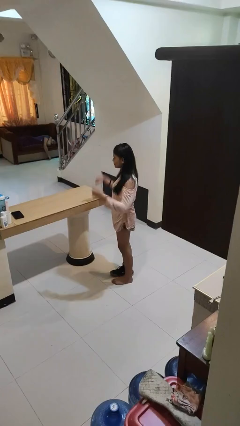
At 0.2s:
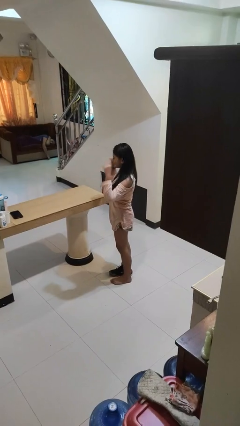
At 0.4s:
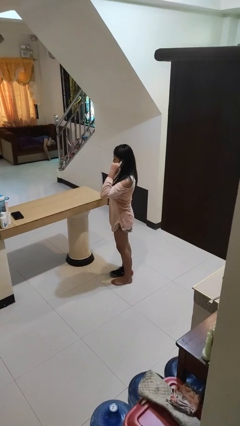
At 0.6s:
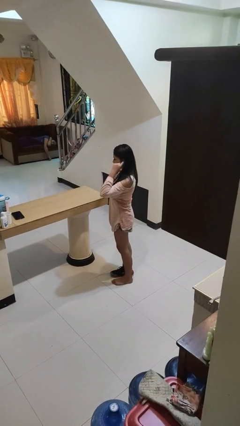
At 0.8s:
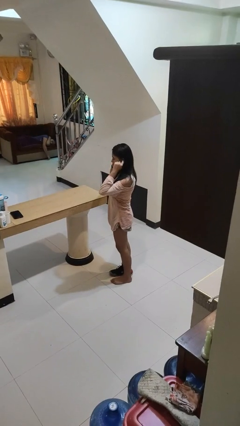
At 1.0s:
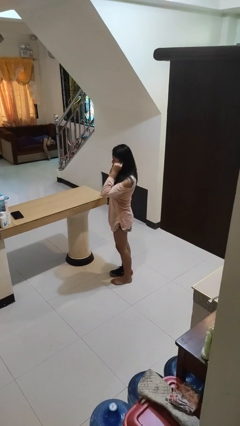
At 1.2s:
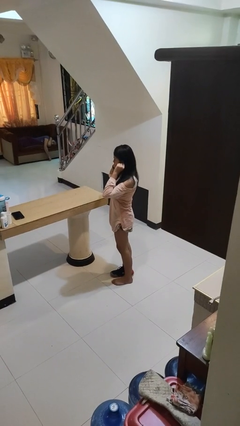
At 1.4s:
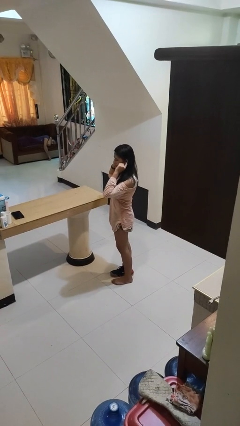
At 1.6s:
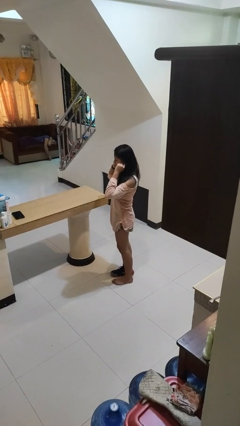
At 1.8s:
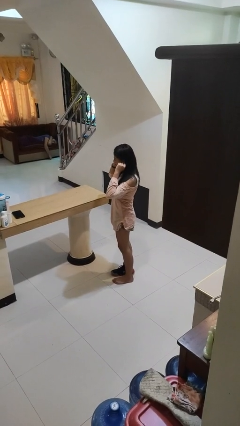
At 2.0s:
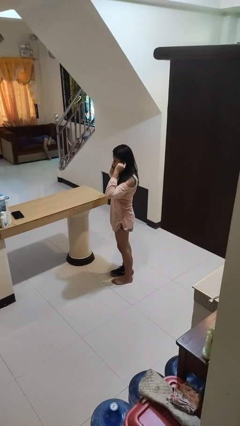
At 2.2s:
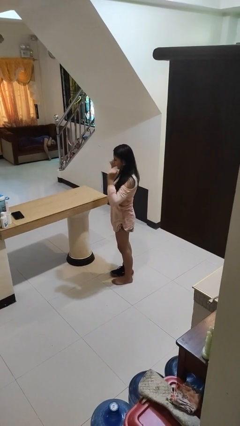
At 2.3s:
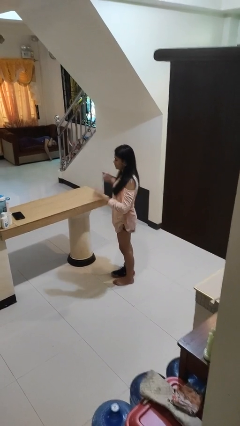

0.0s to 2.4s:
person puts fingers in ear

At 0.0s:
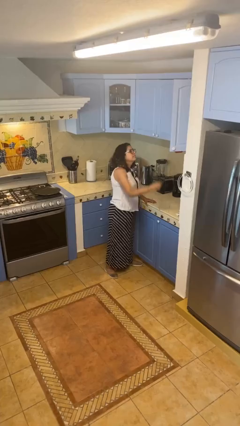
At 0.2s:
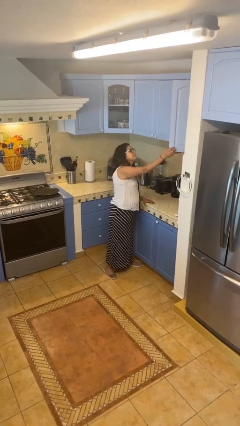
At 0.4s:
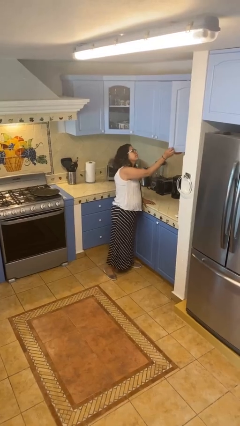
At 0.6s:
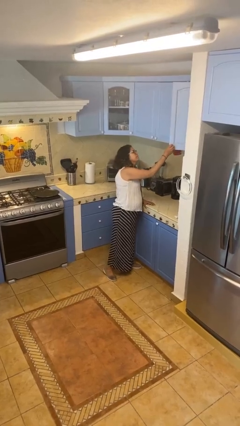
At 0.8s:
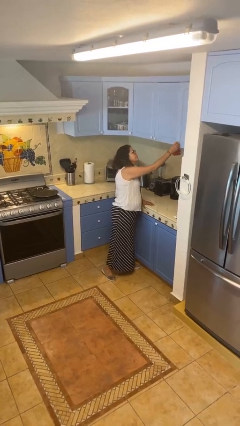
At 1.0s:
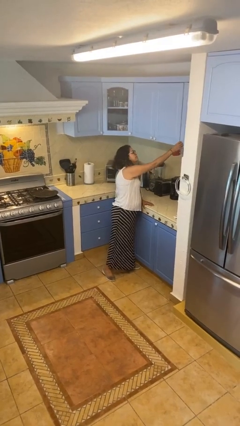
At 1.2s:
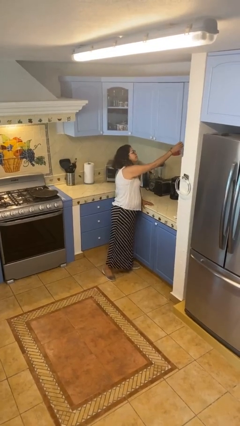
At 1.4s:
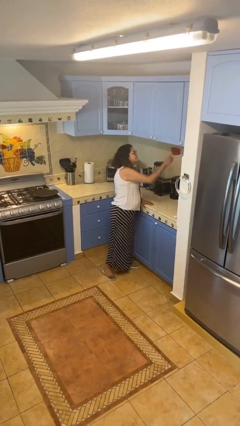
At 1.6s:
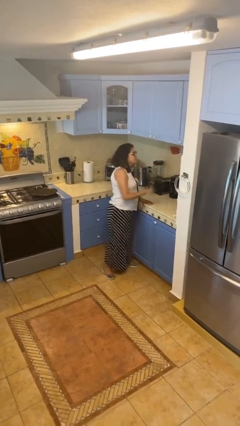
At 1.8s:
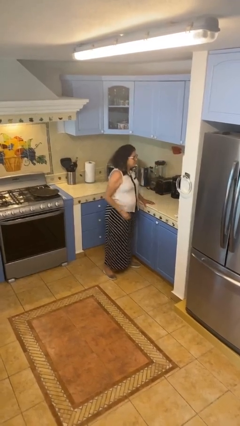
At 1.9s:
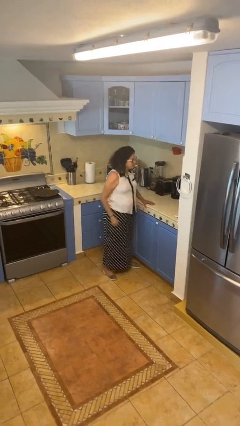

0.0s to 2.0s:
person closes cabinet

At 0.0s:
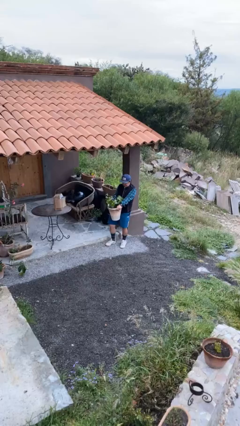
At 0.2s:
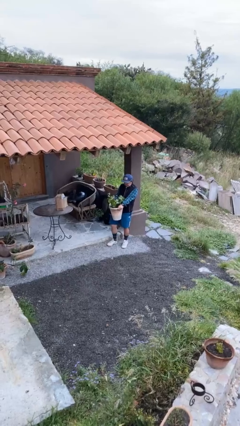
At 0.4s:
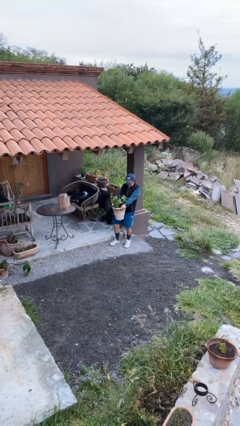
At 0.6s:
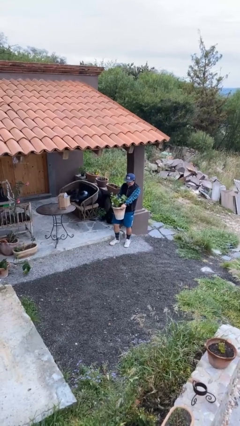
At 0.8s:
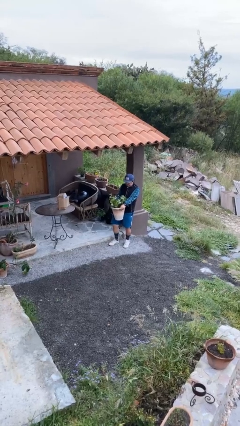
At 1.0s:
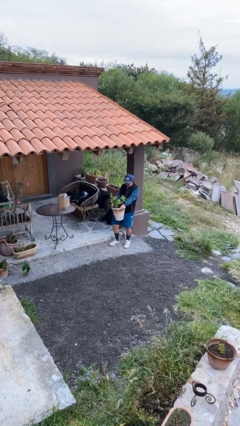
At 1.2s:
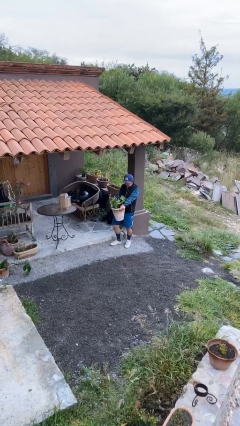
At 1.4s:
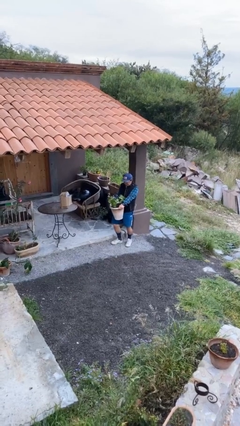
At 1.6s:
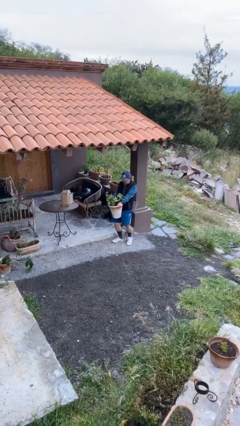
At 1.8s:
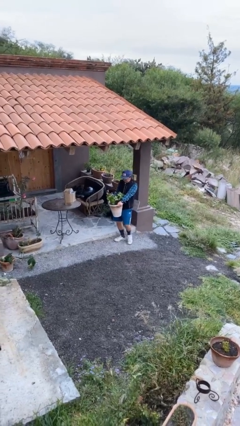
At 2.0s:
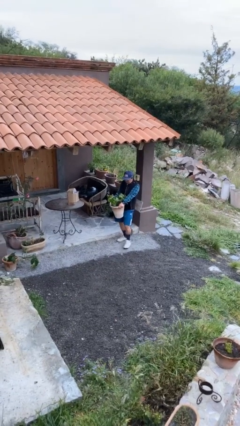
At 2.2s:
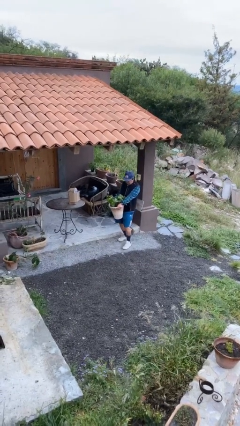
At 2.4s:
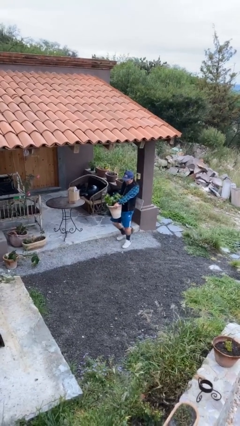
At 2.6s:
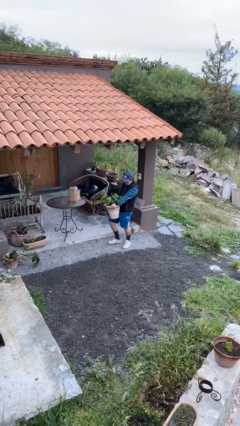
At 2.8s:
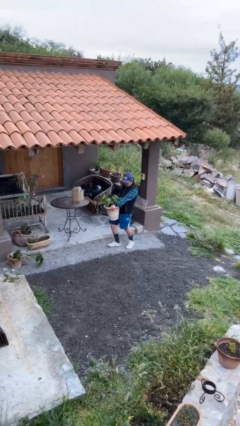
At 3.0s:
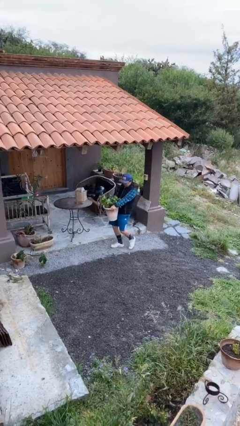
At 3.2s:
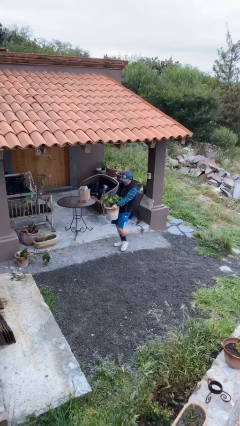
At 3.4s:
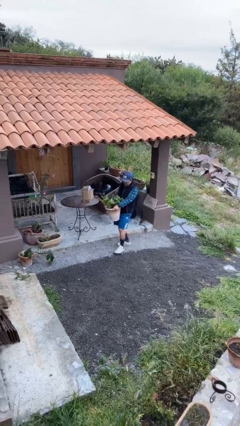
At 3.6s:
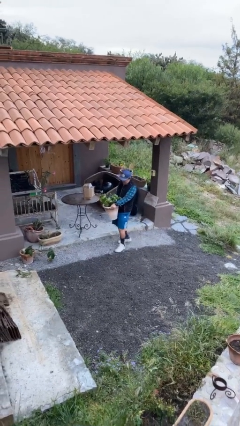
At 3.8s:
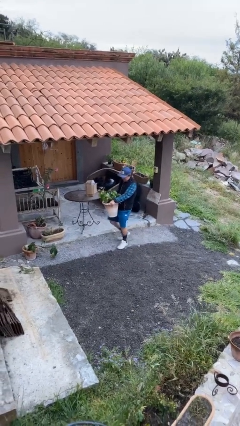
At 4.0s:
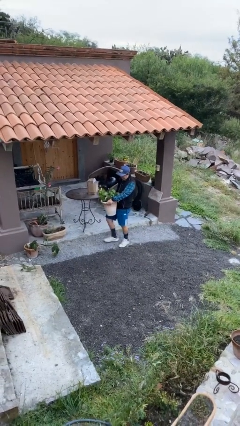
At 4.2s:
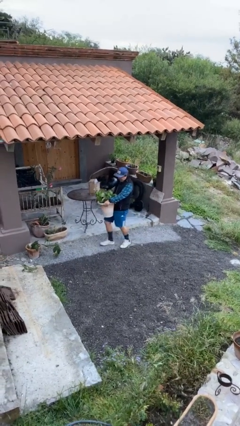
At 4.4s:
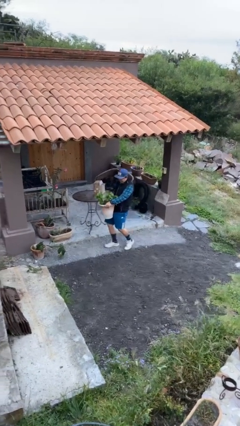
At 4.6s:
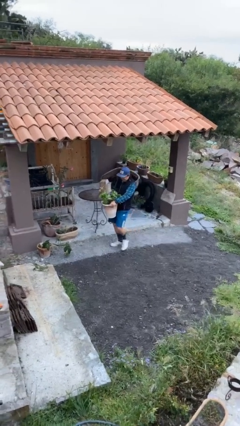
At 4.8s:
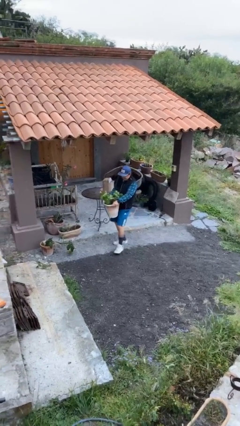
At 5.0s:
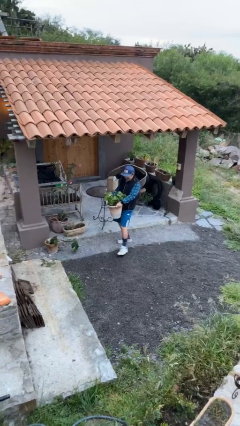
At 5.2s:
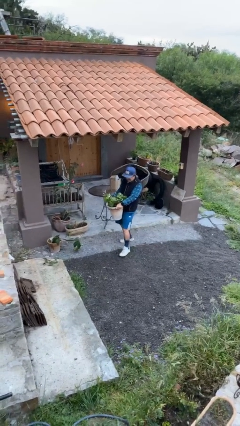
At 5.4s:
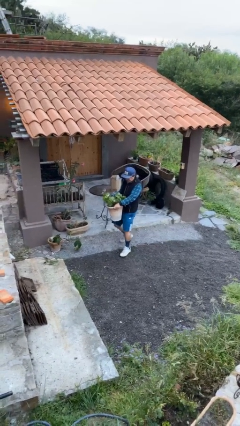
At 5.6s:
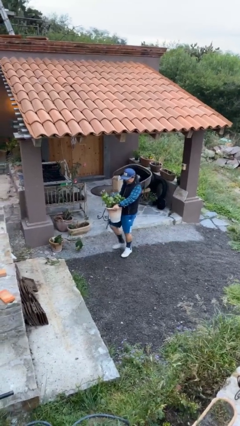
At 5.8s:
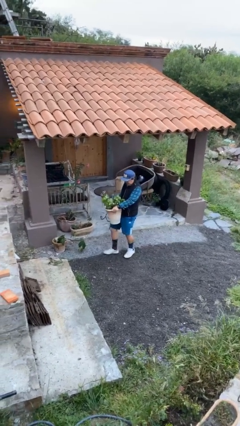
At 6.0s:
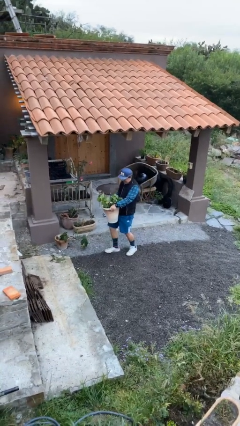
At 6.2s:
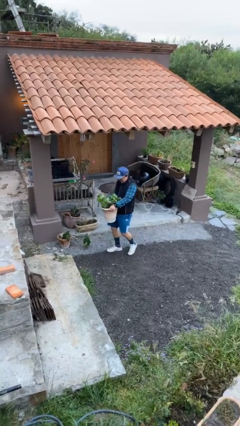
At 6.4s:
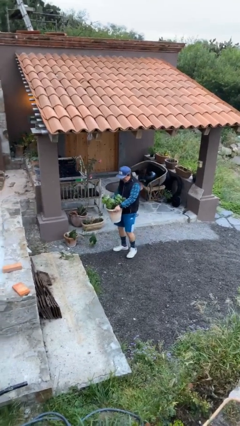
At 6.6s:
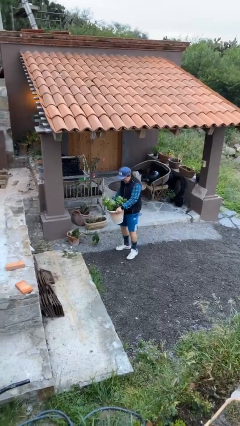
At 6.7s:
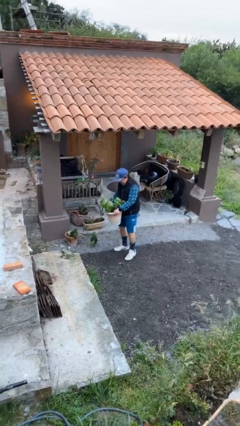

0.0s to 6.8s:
person carries heavy object

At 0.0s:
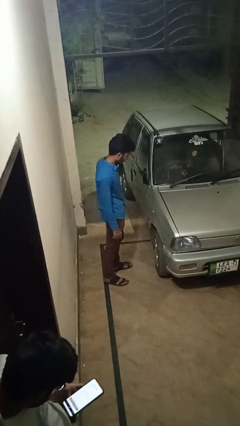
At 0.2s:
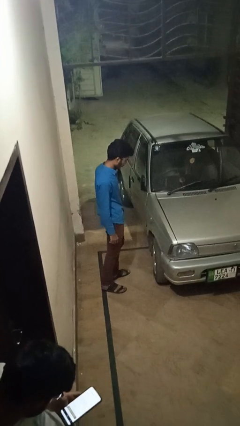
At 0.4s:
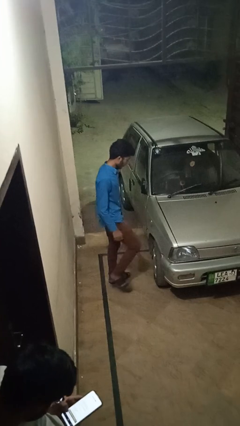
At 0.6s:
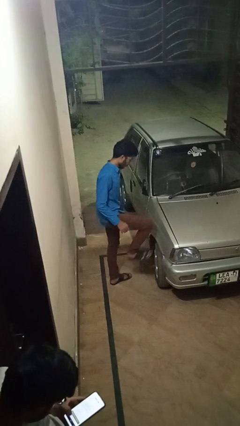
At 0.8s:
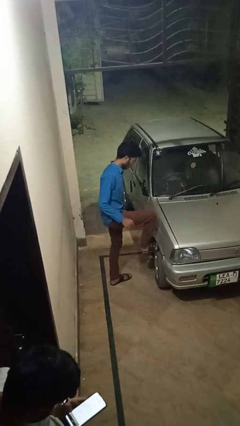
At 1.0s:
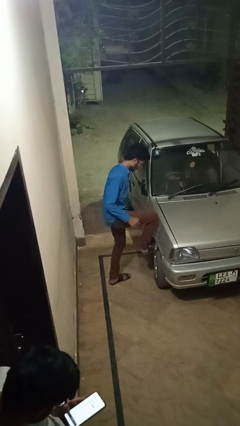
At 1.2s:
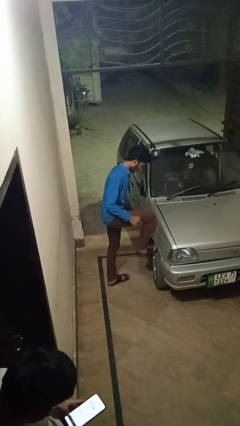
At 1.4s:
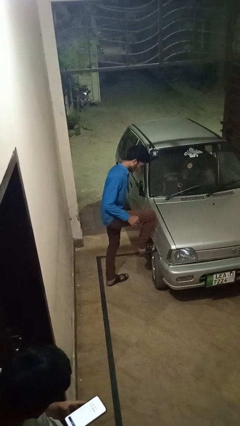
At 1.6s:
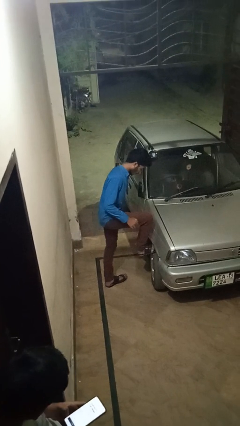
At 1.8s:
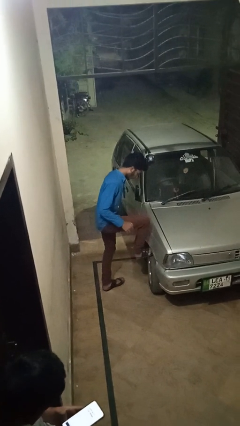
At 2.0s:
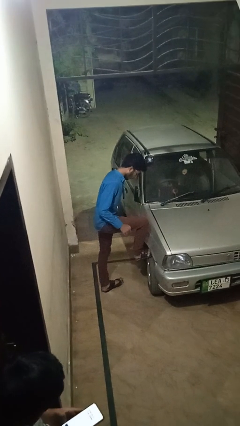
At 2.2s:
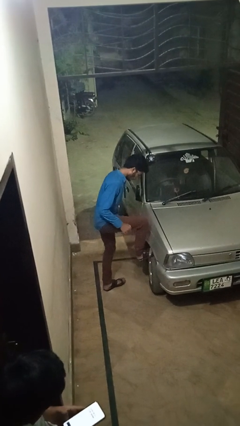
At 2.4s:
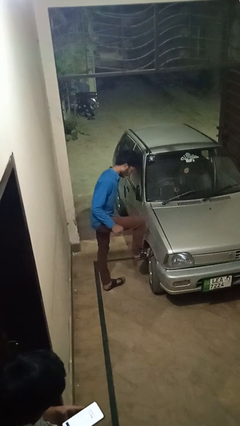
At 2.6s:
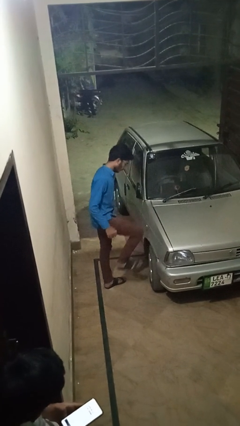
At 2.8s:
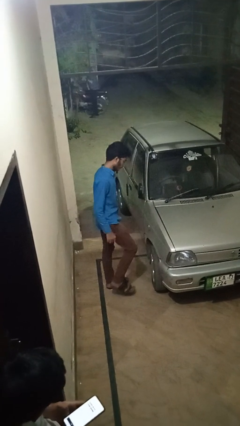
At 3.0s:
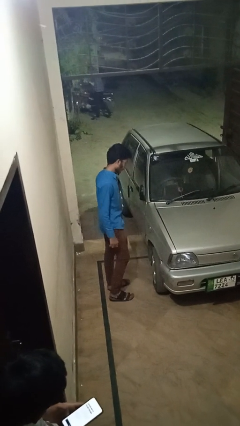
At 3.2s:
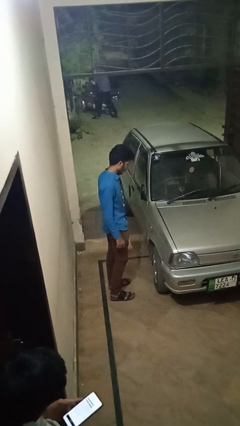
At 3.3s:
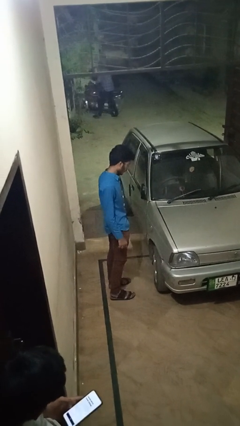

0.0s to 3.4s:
person kicks car tires

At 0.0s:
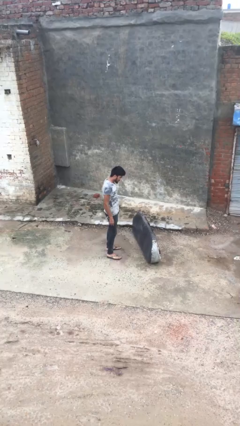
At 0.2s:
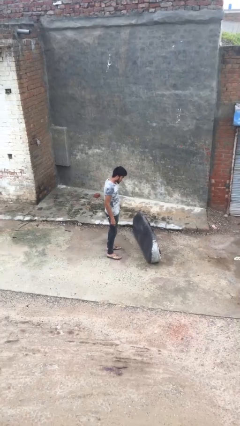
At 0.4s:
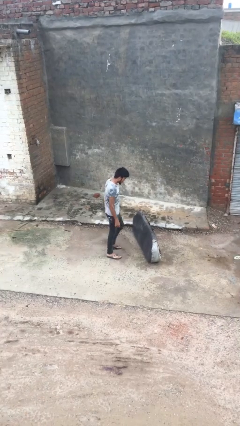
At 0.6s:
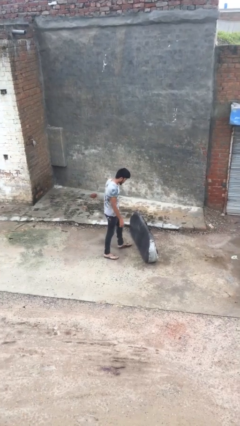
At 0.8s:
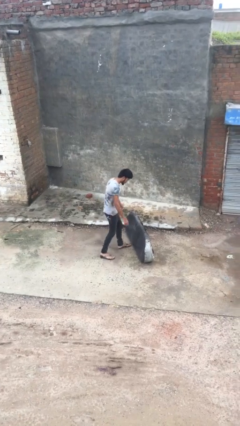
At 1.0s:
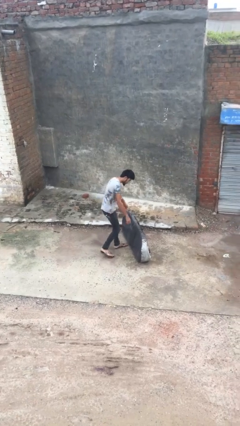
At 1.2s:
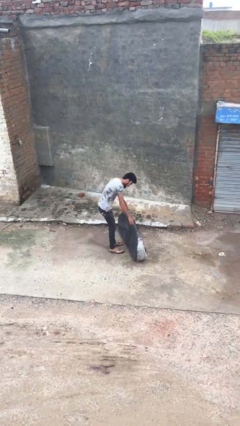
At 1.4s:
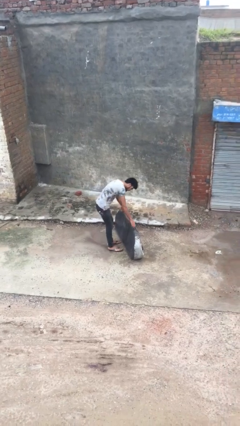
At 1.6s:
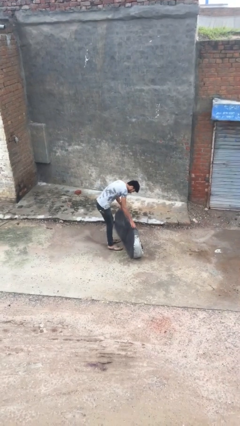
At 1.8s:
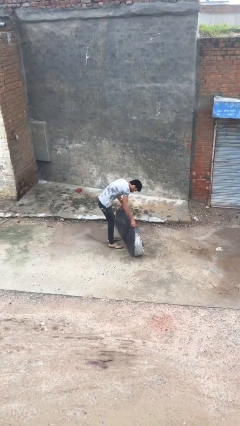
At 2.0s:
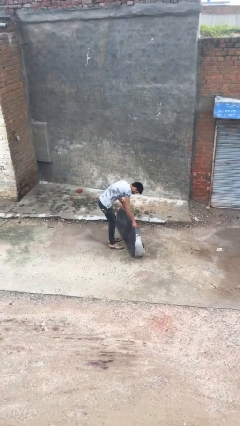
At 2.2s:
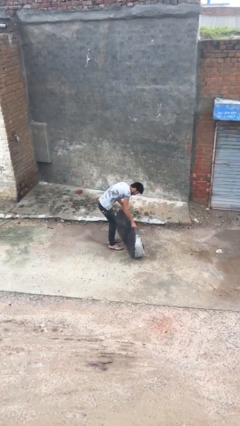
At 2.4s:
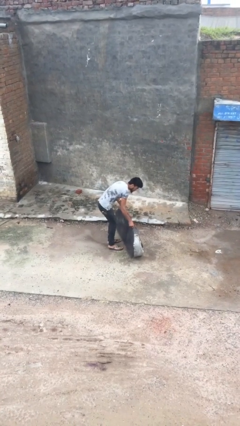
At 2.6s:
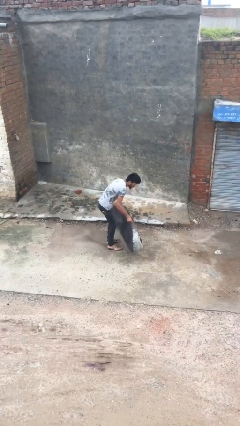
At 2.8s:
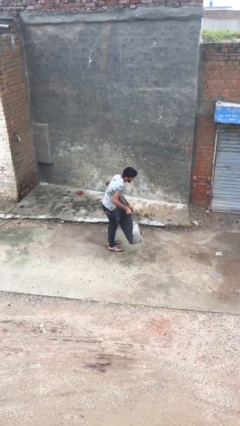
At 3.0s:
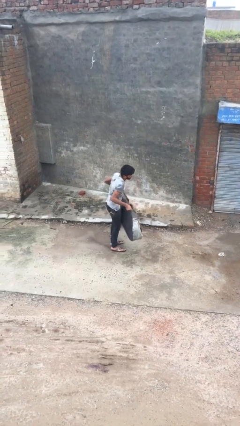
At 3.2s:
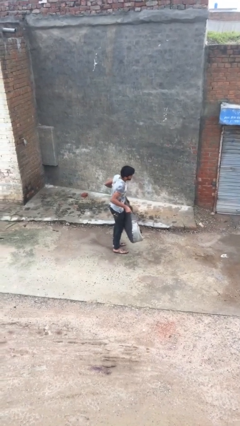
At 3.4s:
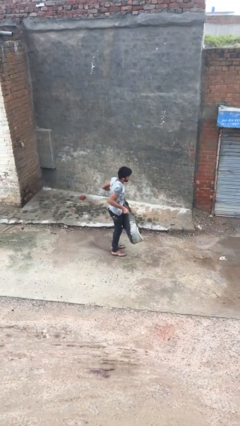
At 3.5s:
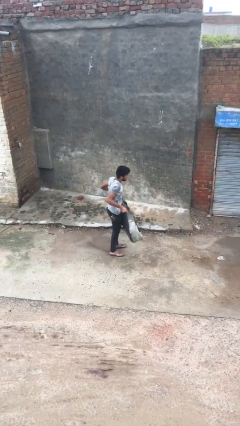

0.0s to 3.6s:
person picks up object from floor
